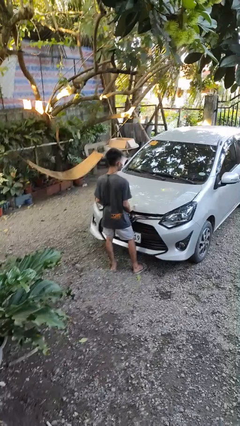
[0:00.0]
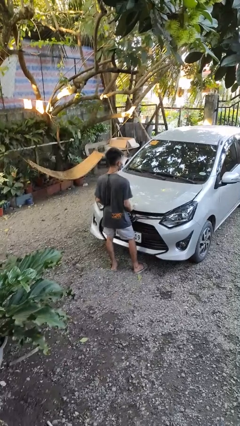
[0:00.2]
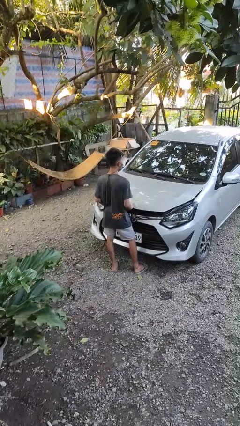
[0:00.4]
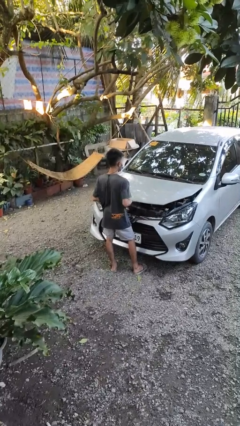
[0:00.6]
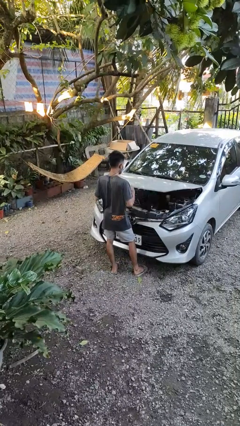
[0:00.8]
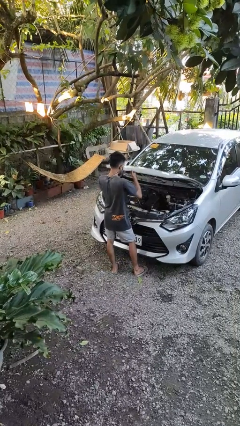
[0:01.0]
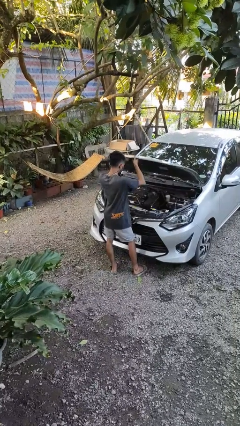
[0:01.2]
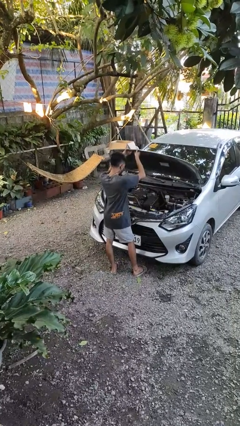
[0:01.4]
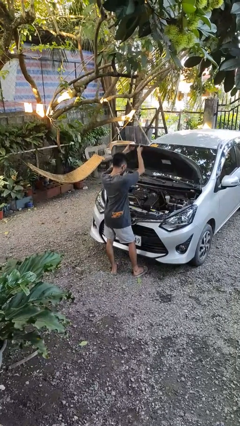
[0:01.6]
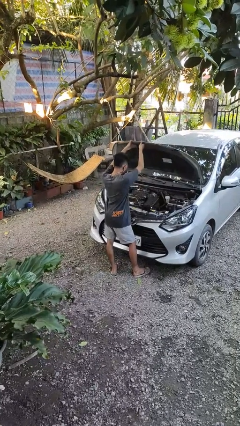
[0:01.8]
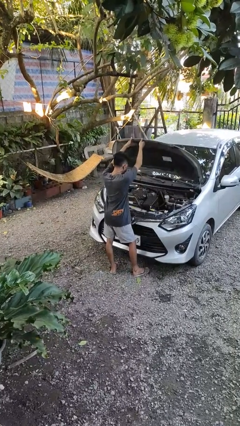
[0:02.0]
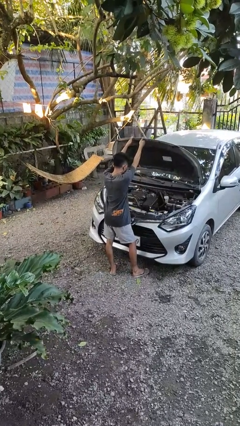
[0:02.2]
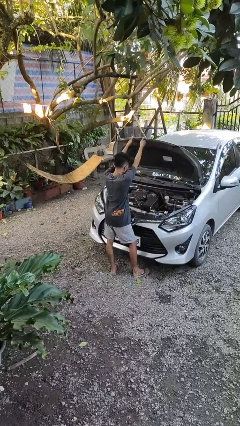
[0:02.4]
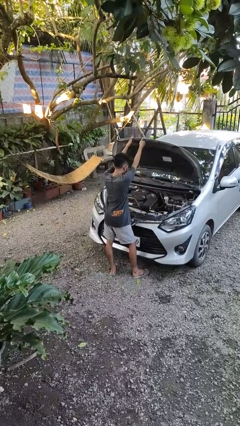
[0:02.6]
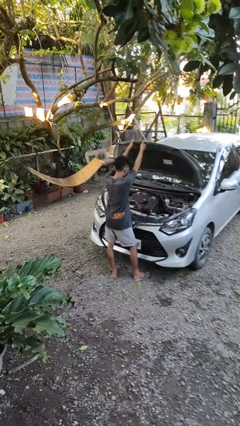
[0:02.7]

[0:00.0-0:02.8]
person opens car hood

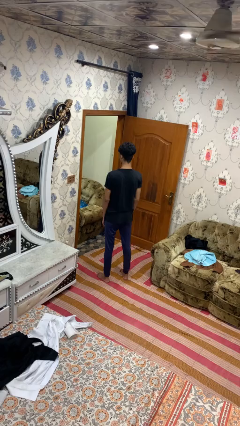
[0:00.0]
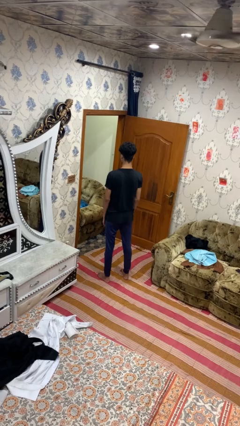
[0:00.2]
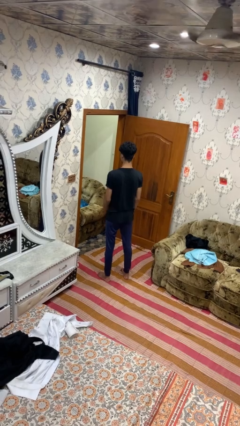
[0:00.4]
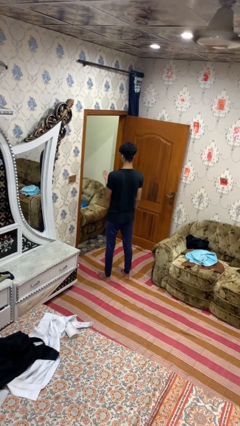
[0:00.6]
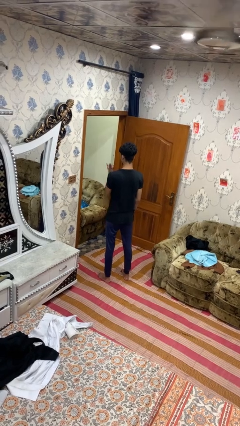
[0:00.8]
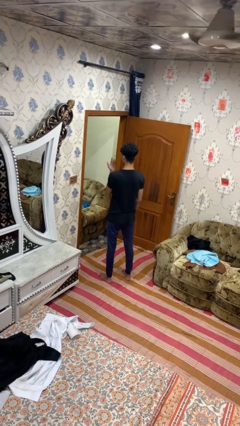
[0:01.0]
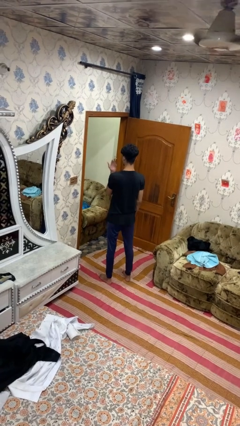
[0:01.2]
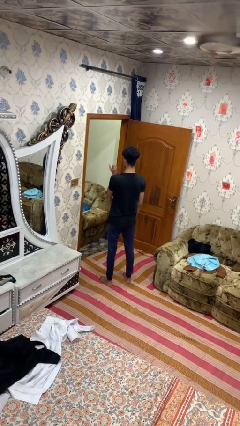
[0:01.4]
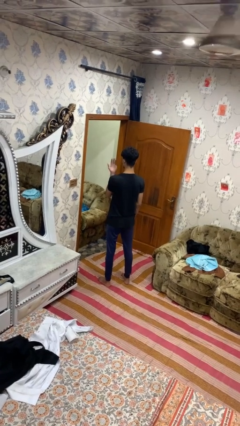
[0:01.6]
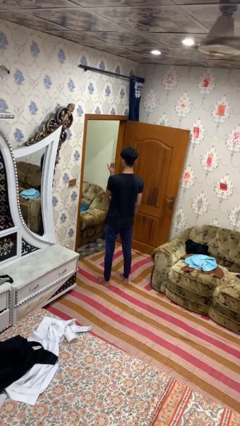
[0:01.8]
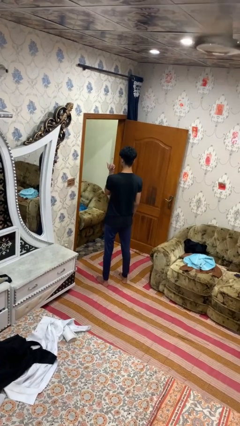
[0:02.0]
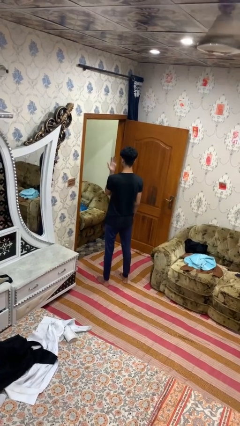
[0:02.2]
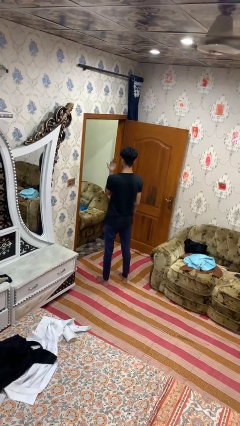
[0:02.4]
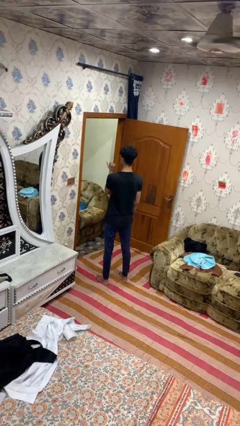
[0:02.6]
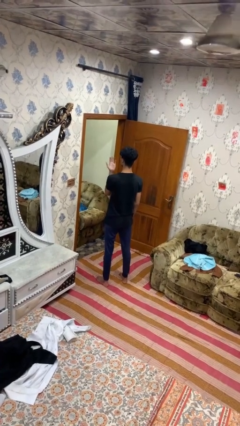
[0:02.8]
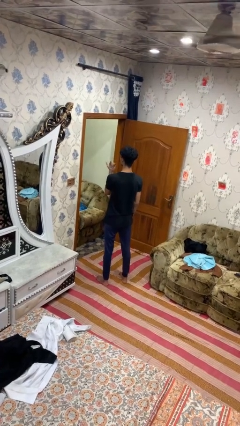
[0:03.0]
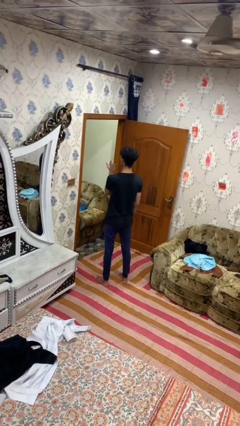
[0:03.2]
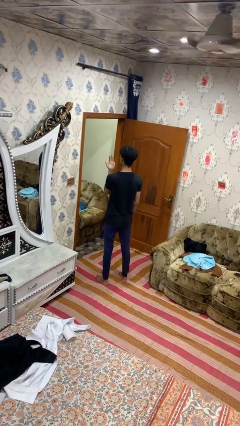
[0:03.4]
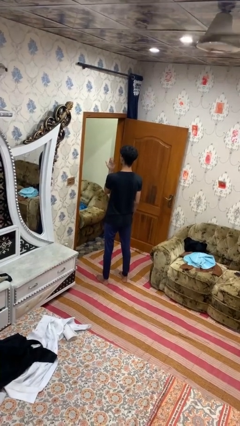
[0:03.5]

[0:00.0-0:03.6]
person gestures listen closely

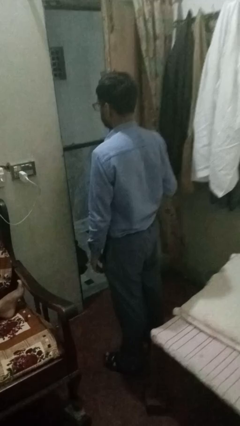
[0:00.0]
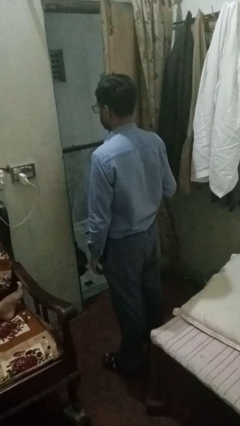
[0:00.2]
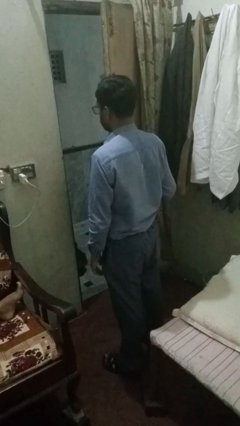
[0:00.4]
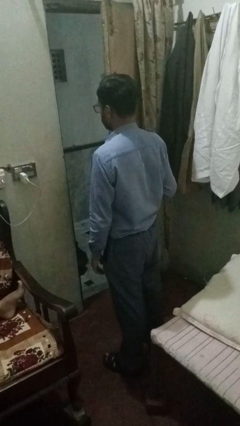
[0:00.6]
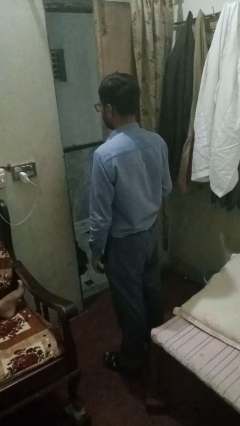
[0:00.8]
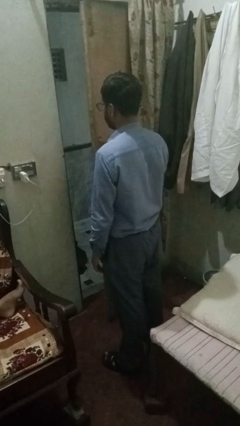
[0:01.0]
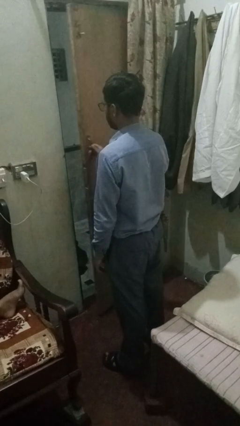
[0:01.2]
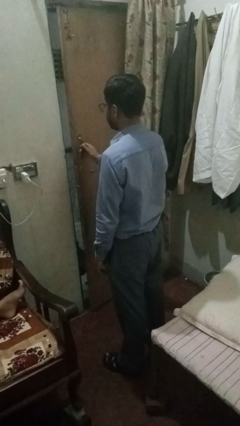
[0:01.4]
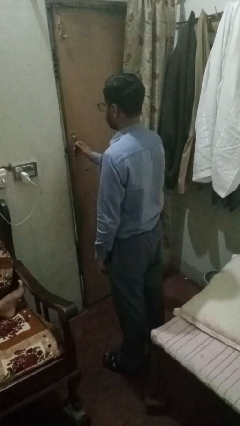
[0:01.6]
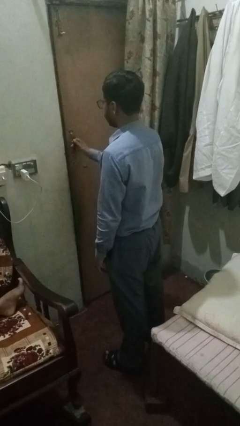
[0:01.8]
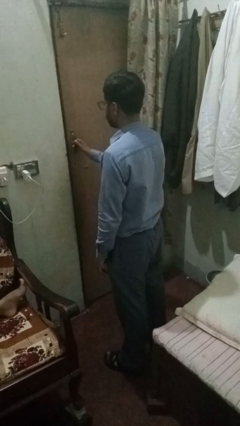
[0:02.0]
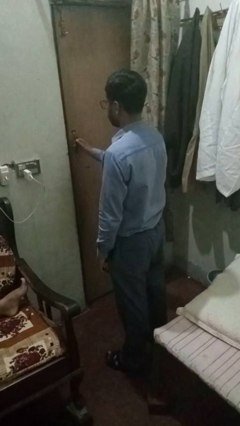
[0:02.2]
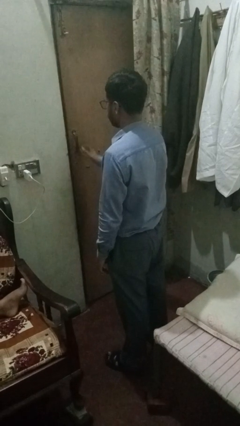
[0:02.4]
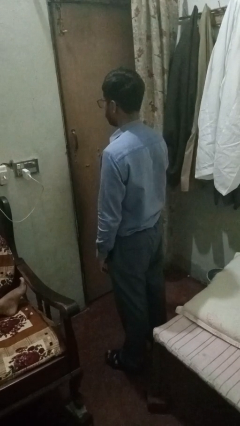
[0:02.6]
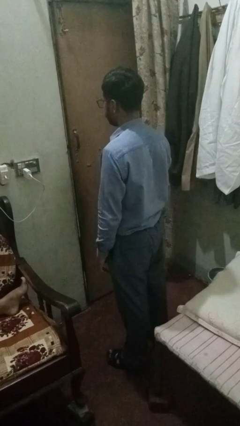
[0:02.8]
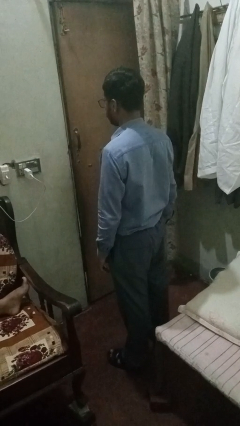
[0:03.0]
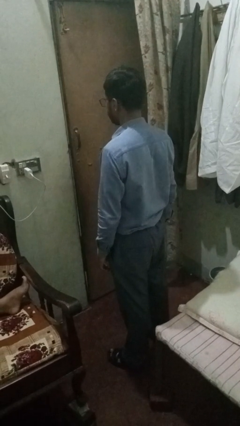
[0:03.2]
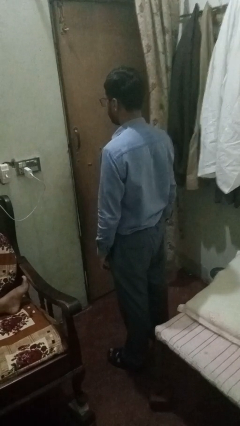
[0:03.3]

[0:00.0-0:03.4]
person closes sliding door

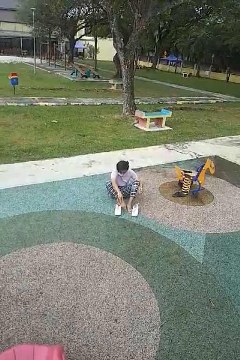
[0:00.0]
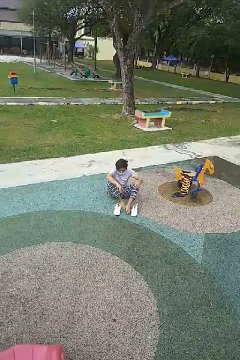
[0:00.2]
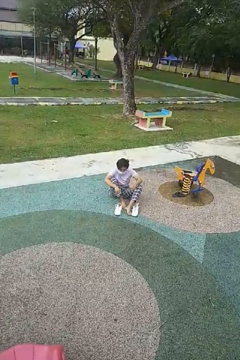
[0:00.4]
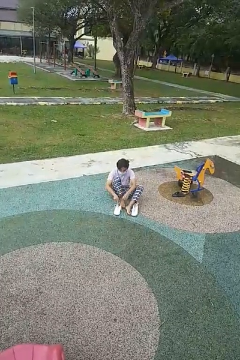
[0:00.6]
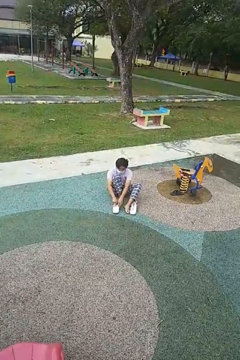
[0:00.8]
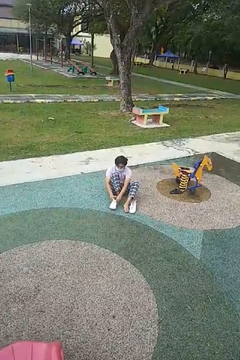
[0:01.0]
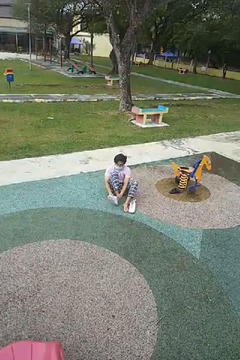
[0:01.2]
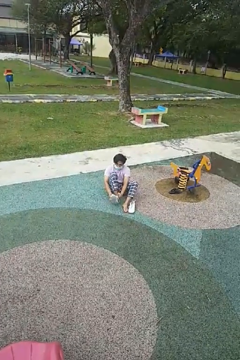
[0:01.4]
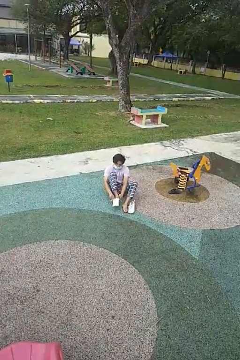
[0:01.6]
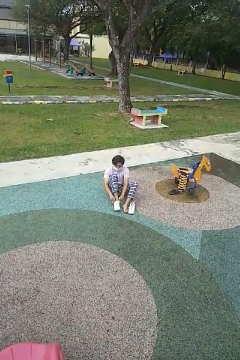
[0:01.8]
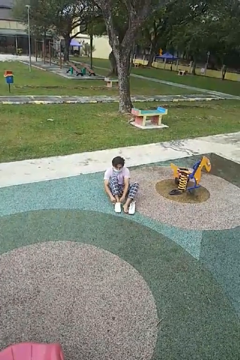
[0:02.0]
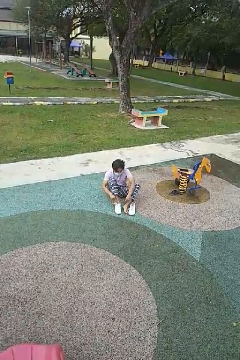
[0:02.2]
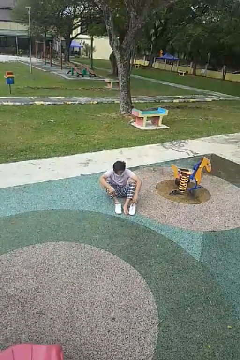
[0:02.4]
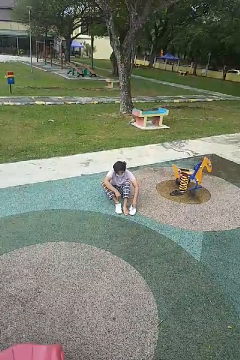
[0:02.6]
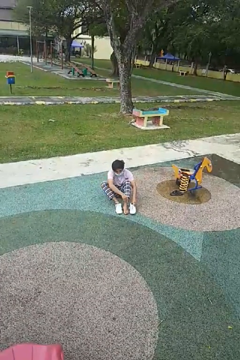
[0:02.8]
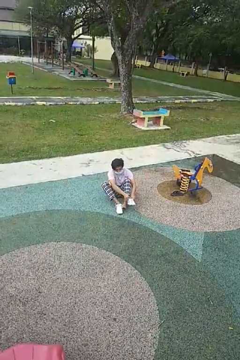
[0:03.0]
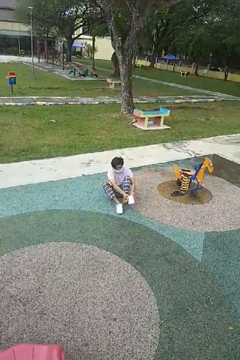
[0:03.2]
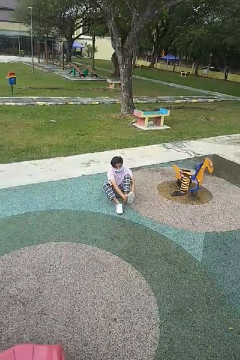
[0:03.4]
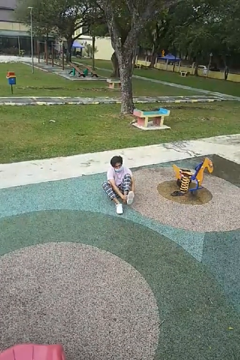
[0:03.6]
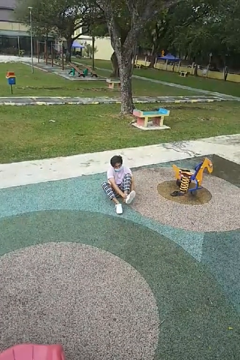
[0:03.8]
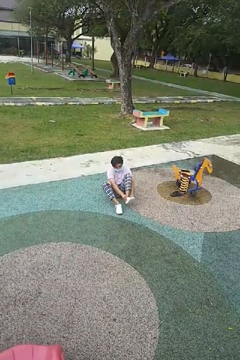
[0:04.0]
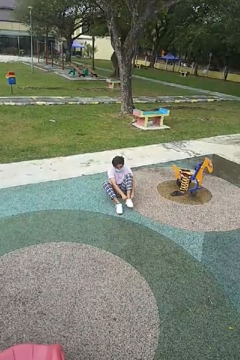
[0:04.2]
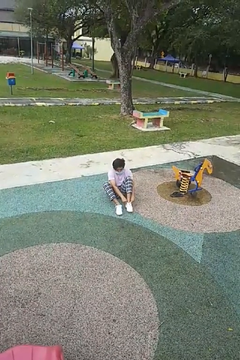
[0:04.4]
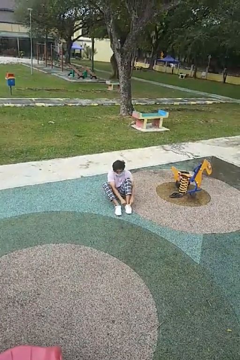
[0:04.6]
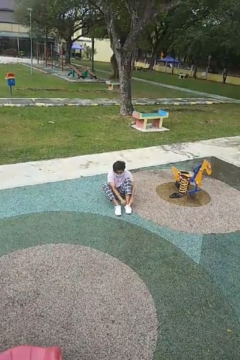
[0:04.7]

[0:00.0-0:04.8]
person puts on shoes

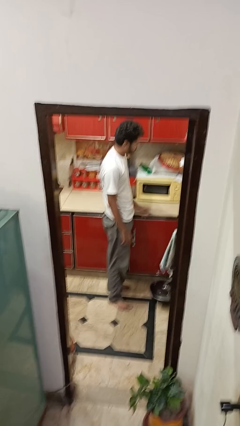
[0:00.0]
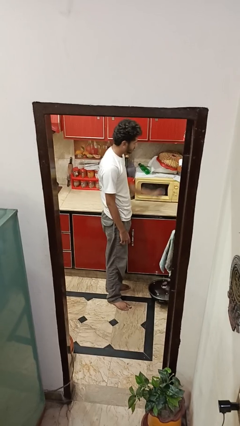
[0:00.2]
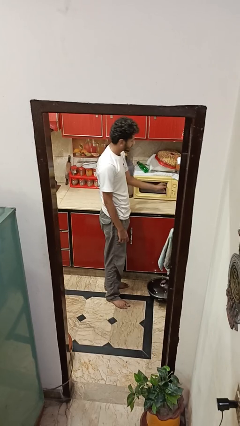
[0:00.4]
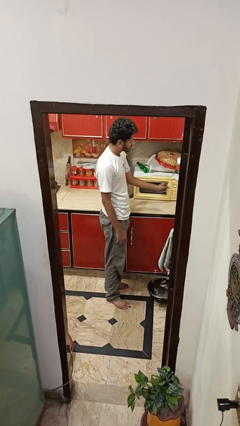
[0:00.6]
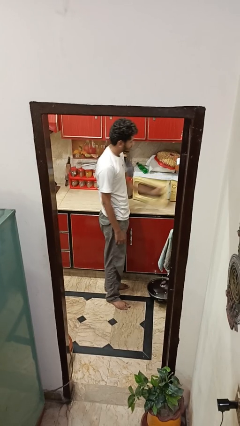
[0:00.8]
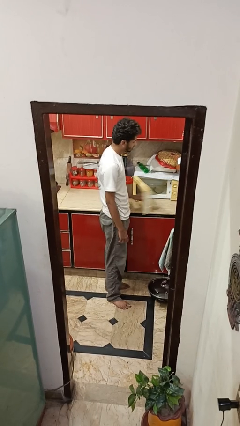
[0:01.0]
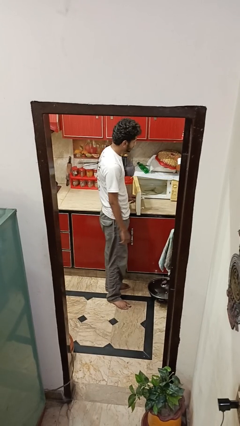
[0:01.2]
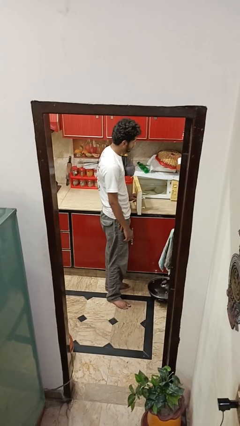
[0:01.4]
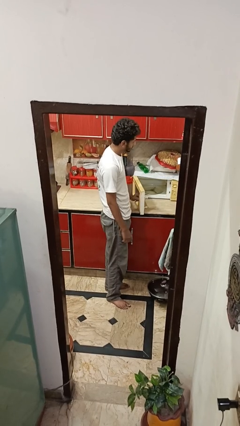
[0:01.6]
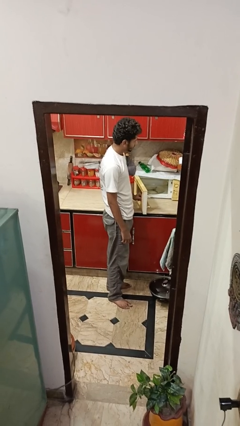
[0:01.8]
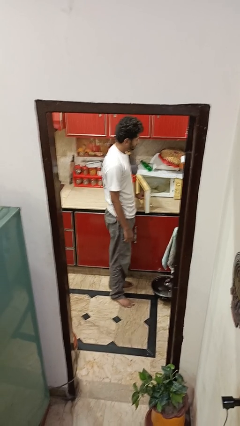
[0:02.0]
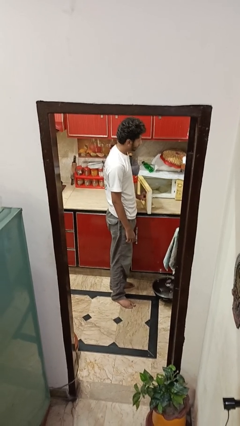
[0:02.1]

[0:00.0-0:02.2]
person opens oven door

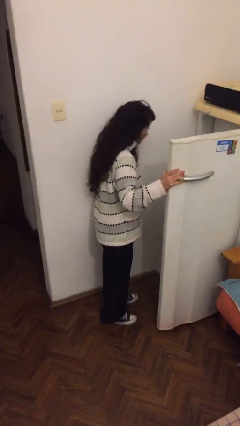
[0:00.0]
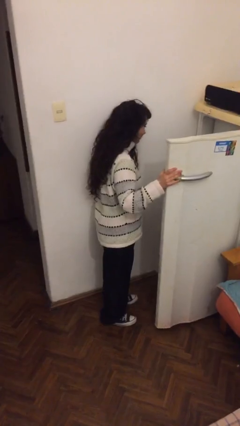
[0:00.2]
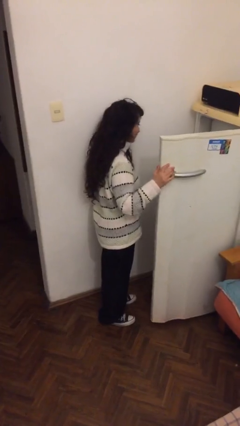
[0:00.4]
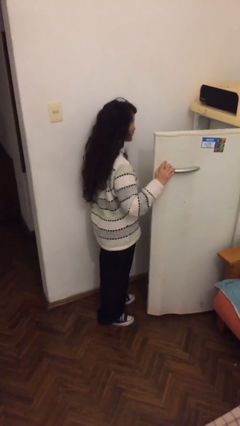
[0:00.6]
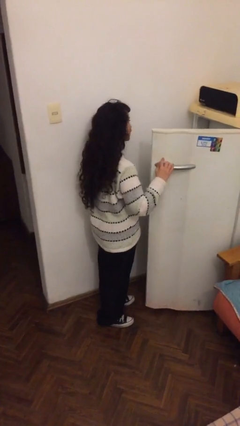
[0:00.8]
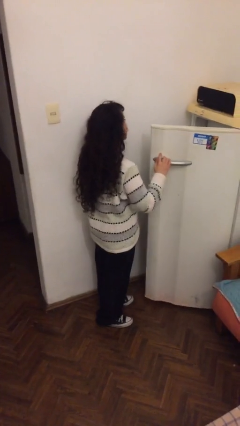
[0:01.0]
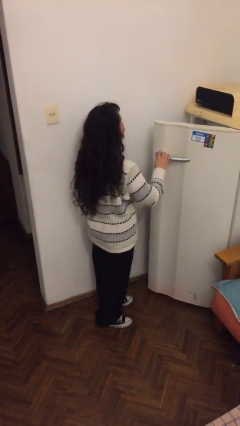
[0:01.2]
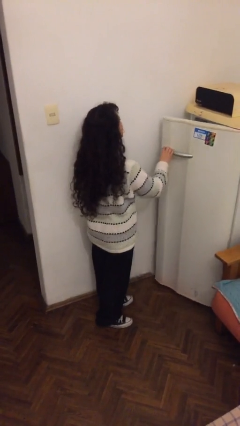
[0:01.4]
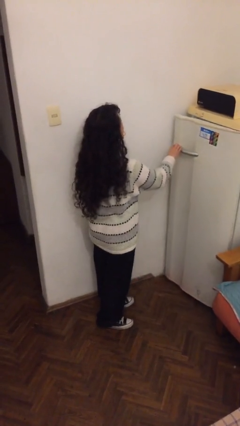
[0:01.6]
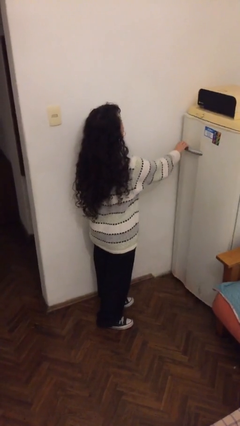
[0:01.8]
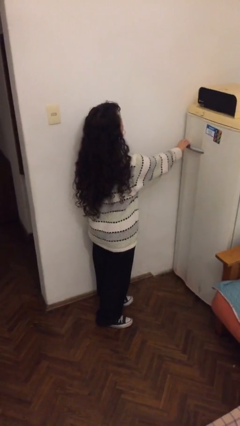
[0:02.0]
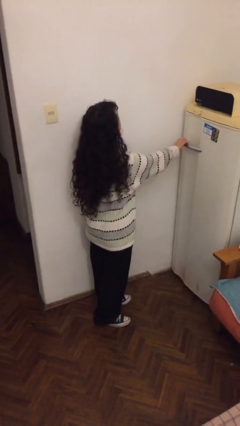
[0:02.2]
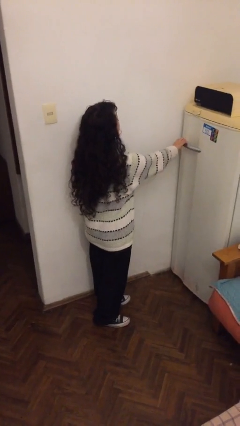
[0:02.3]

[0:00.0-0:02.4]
person closes refrigerator
